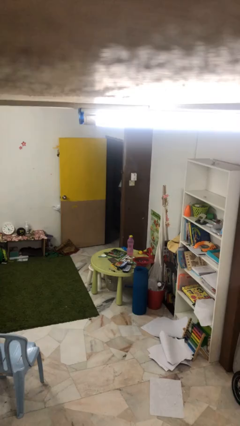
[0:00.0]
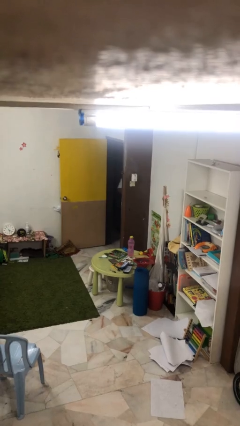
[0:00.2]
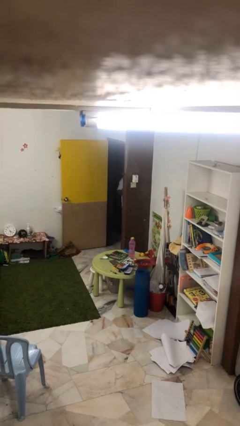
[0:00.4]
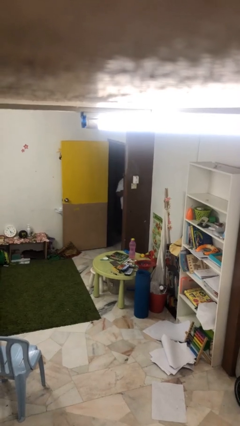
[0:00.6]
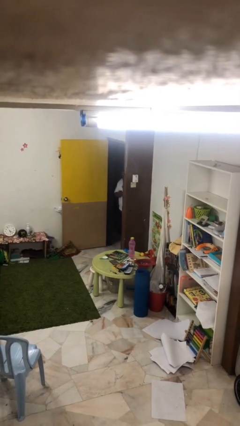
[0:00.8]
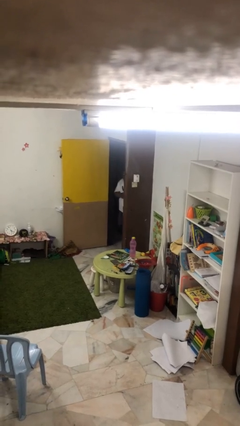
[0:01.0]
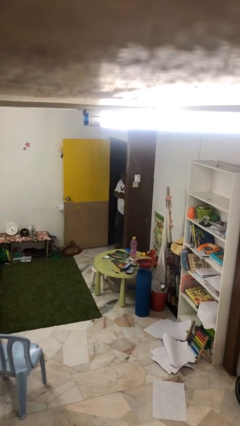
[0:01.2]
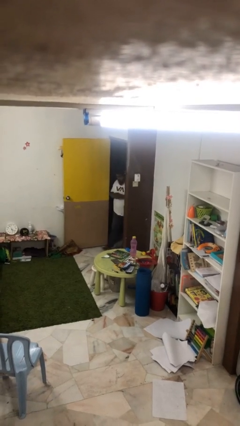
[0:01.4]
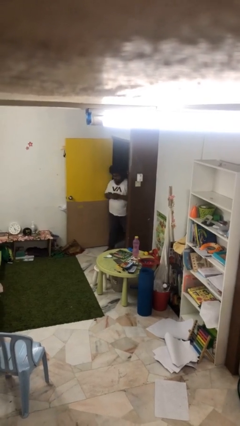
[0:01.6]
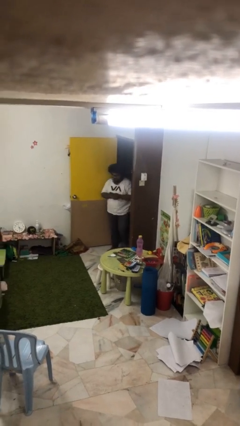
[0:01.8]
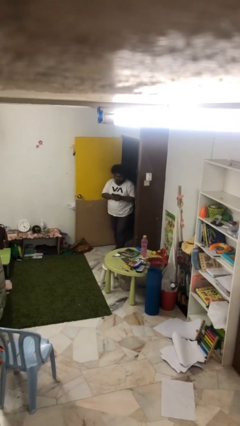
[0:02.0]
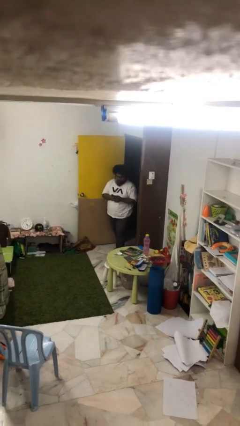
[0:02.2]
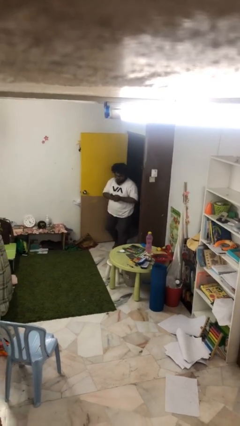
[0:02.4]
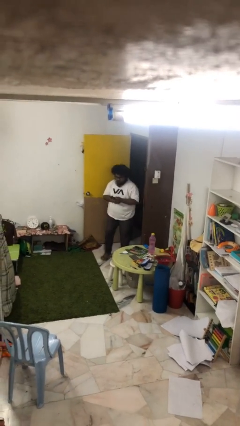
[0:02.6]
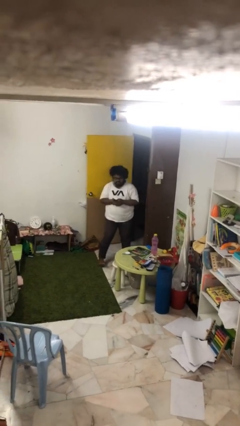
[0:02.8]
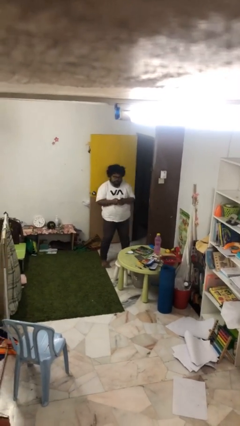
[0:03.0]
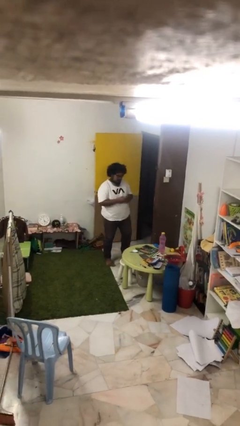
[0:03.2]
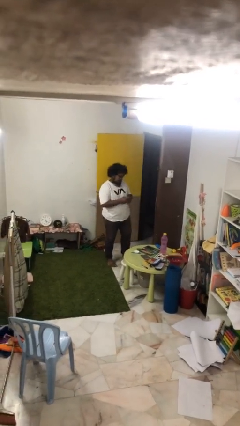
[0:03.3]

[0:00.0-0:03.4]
person enters scene through structure

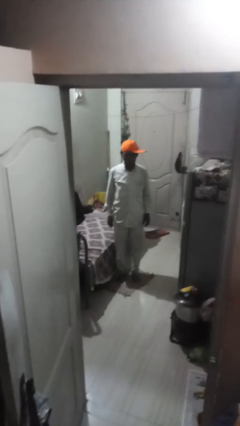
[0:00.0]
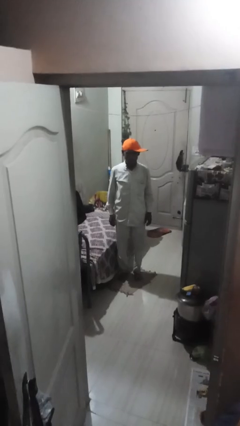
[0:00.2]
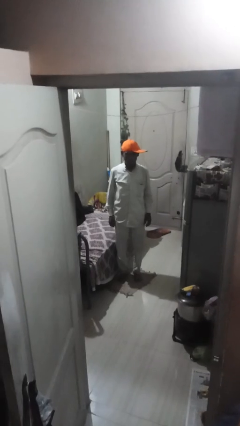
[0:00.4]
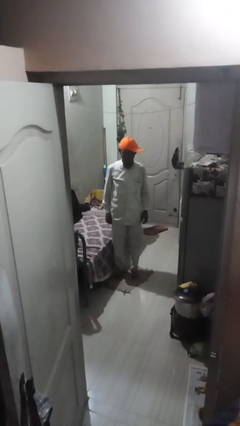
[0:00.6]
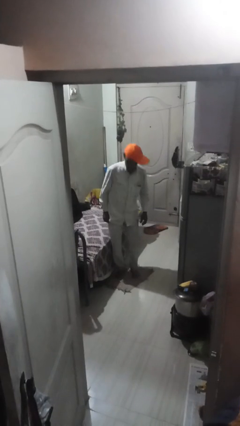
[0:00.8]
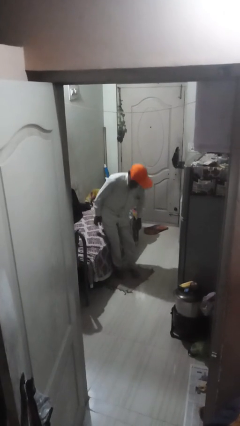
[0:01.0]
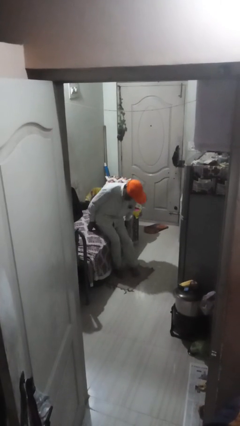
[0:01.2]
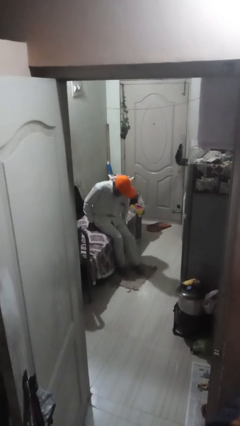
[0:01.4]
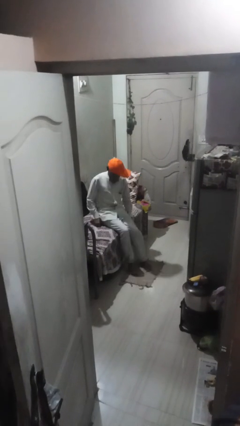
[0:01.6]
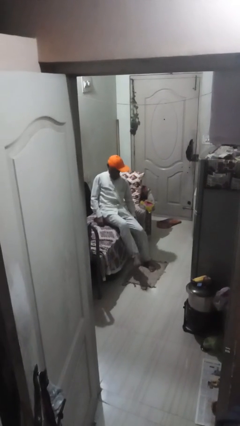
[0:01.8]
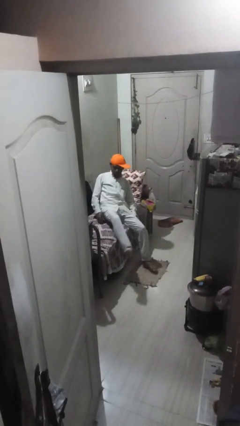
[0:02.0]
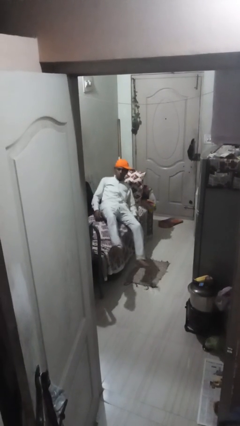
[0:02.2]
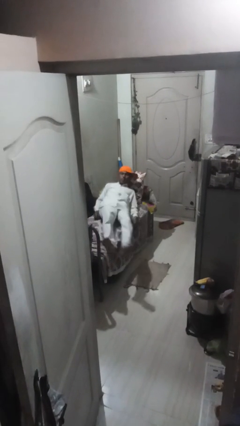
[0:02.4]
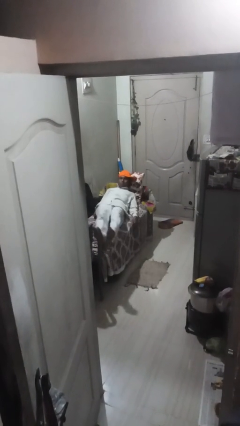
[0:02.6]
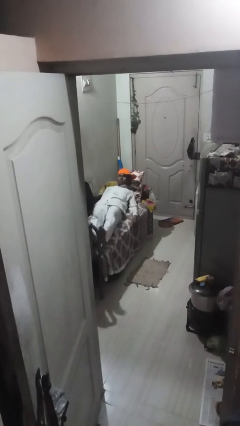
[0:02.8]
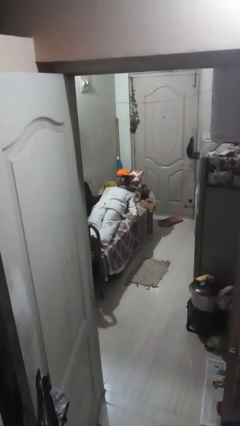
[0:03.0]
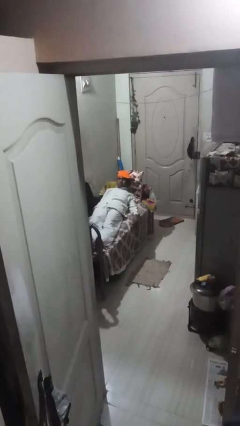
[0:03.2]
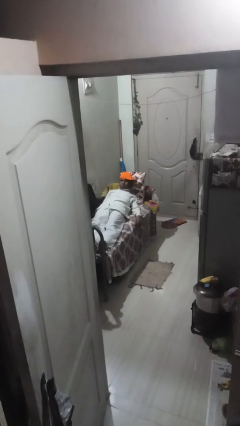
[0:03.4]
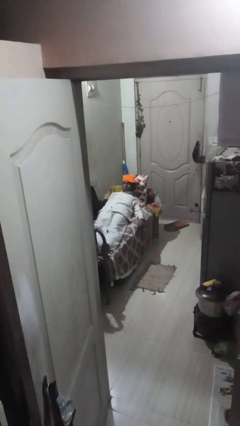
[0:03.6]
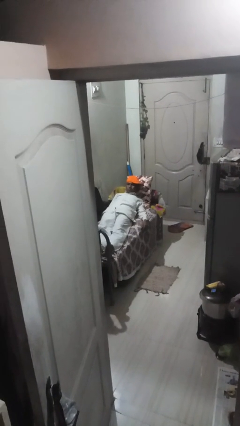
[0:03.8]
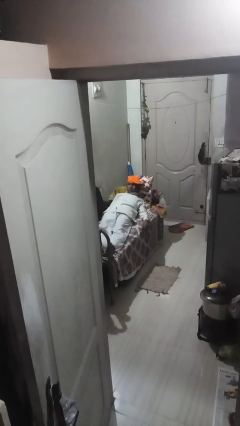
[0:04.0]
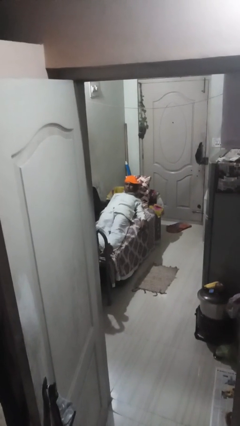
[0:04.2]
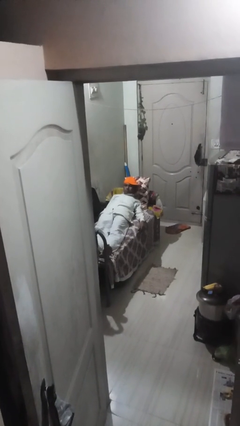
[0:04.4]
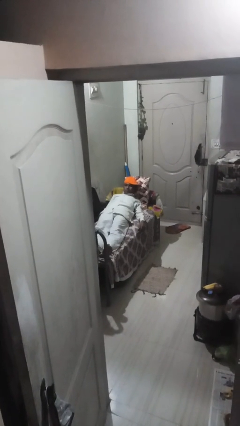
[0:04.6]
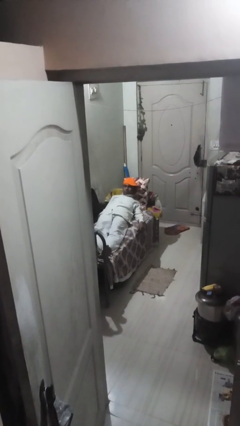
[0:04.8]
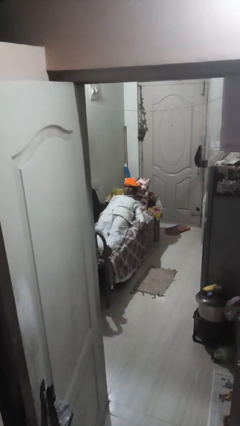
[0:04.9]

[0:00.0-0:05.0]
person lies down on bed

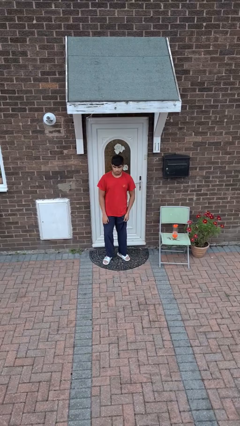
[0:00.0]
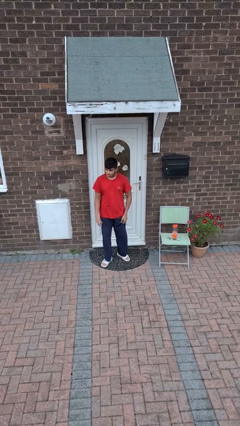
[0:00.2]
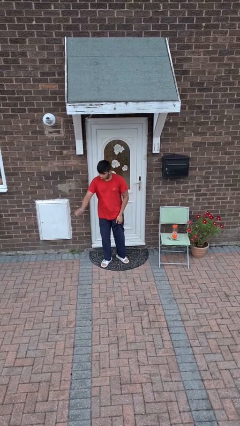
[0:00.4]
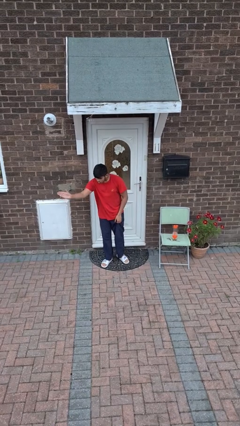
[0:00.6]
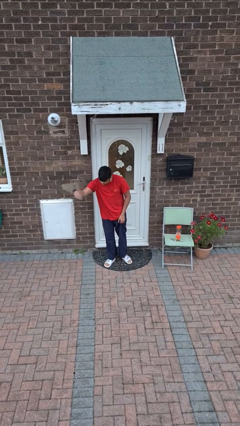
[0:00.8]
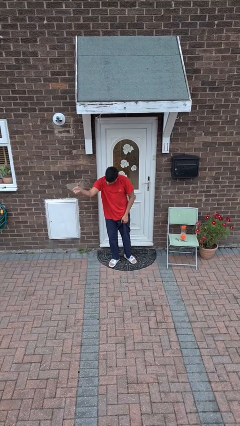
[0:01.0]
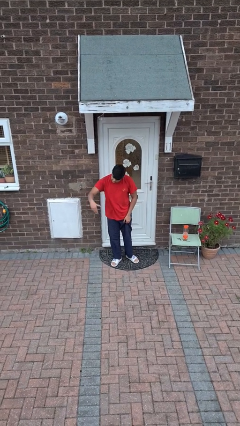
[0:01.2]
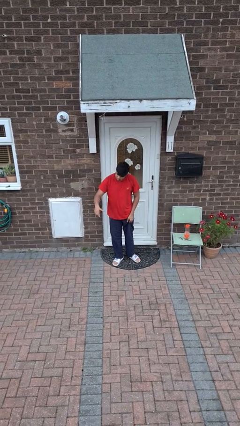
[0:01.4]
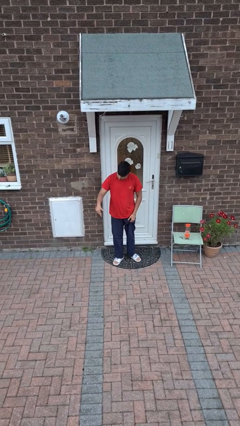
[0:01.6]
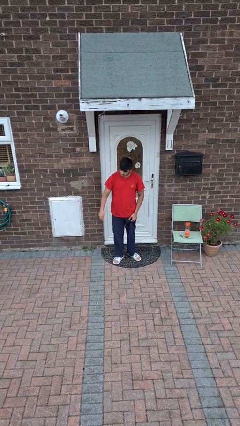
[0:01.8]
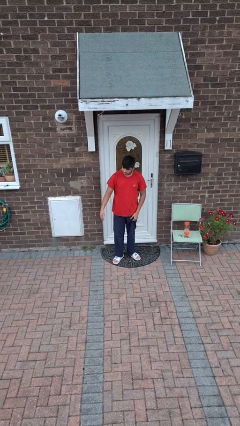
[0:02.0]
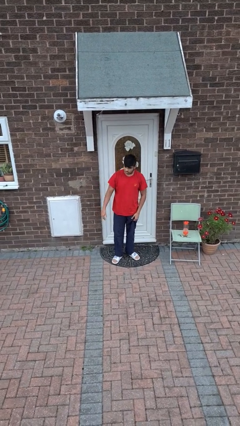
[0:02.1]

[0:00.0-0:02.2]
person gestures come here

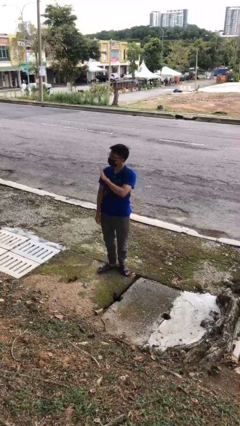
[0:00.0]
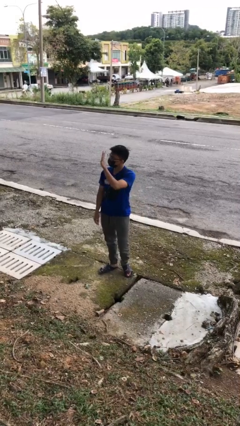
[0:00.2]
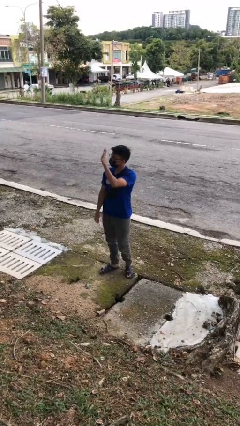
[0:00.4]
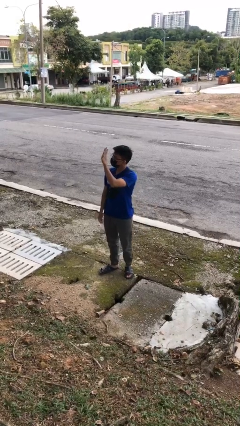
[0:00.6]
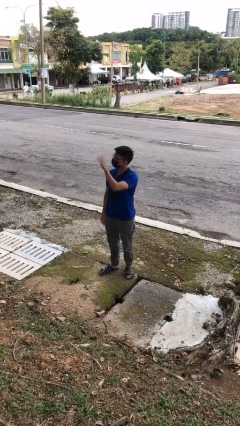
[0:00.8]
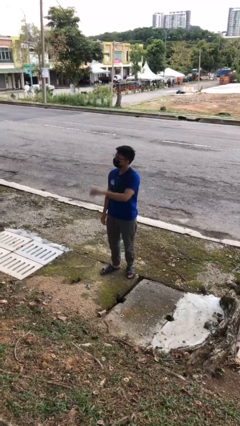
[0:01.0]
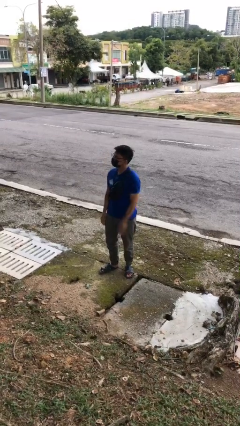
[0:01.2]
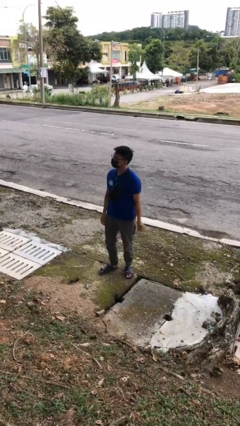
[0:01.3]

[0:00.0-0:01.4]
person gestures number five

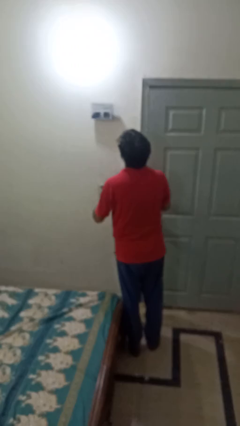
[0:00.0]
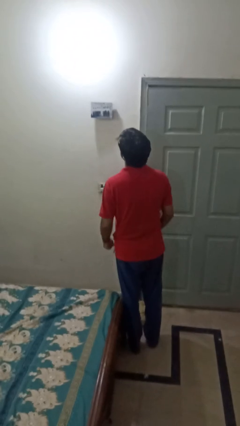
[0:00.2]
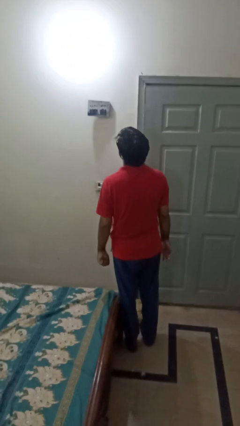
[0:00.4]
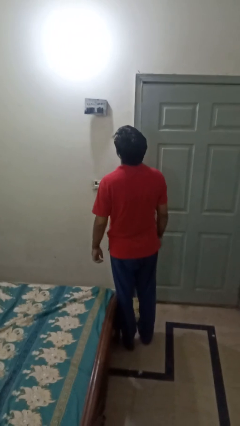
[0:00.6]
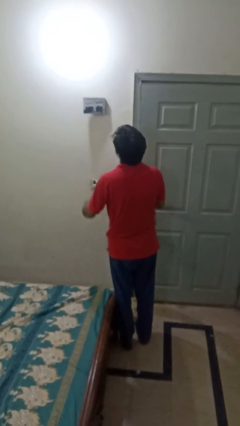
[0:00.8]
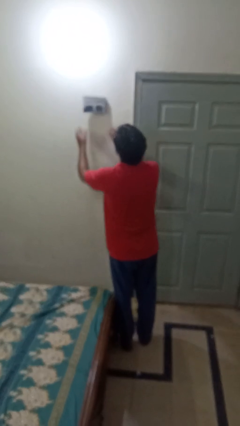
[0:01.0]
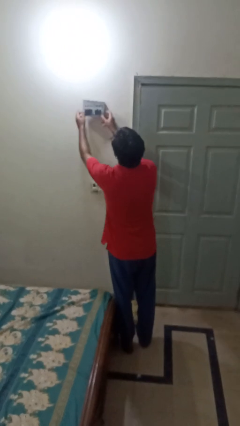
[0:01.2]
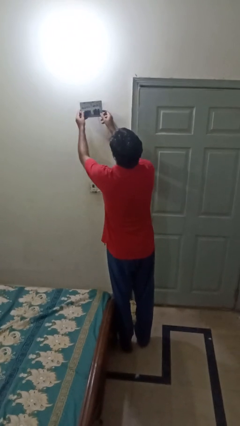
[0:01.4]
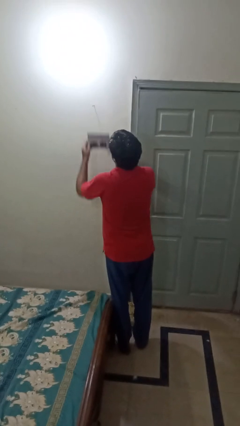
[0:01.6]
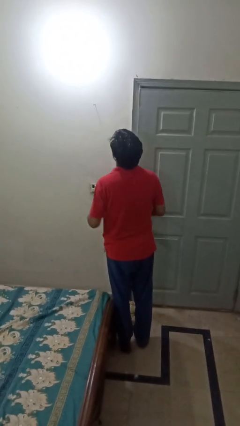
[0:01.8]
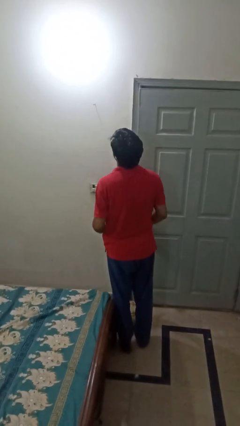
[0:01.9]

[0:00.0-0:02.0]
person takes down picture frame

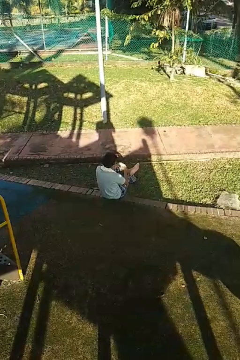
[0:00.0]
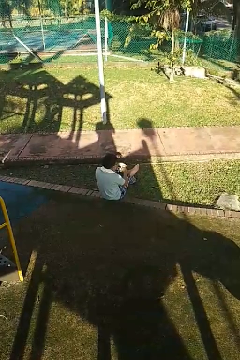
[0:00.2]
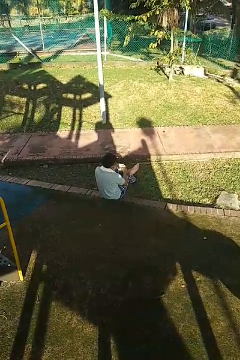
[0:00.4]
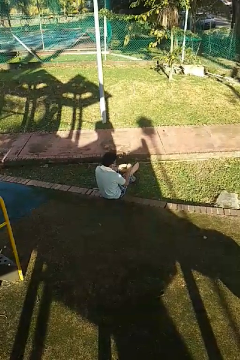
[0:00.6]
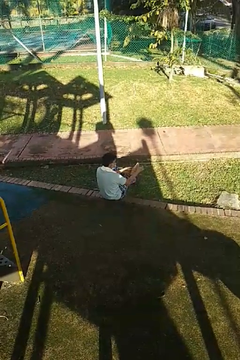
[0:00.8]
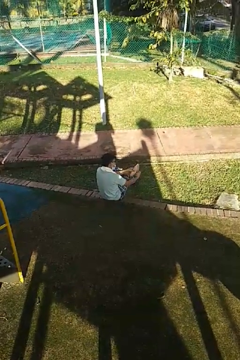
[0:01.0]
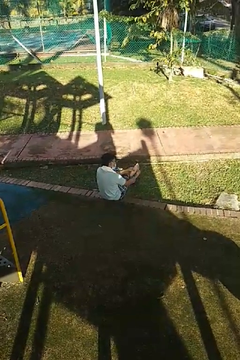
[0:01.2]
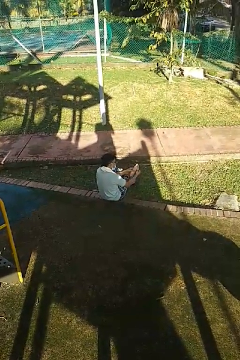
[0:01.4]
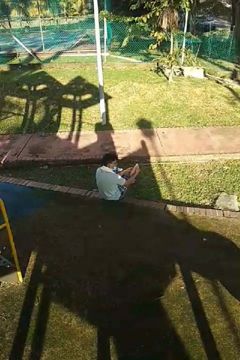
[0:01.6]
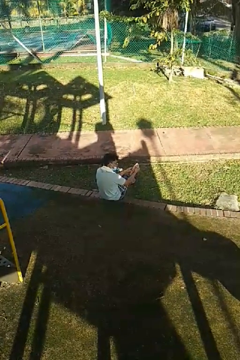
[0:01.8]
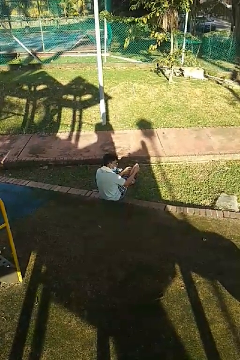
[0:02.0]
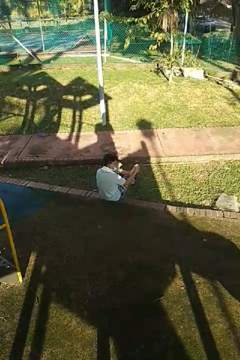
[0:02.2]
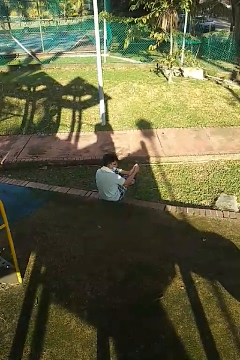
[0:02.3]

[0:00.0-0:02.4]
person rubs foot

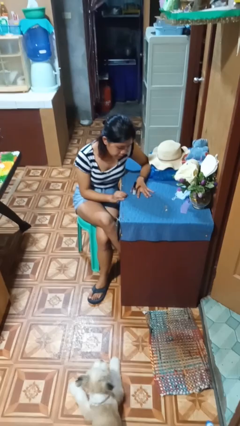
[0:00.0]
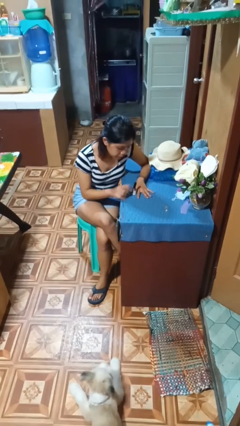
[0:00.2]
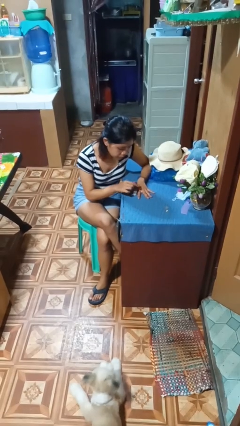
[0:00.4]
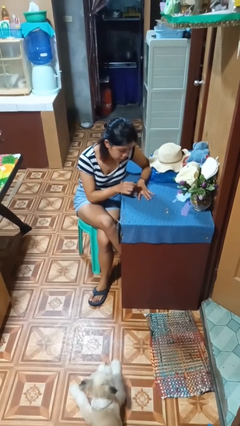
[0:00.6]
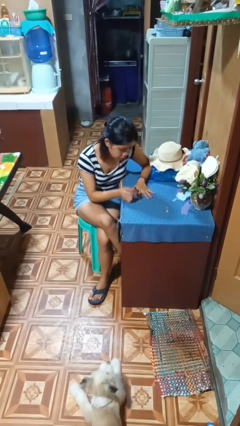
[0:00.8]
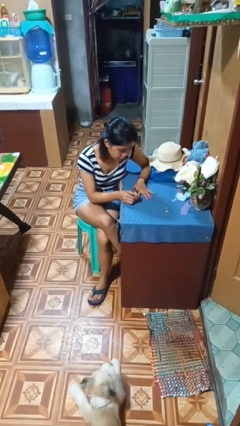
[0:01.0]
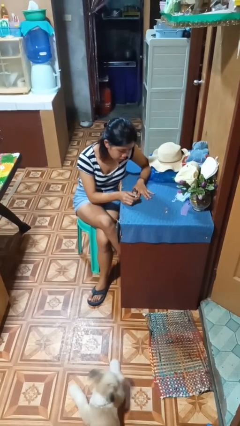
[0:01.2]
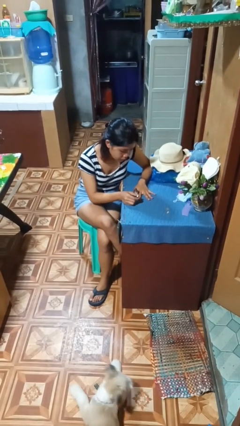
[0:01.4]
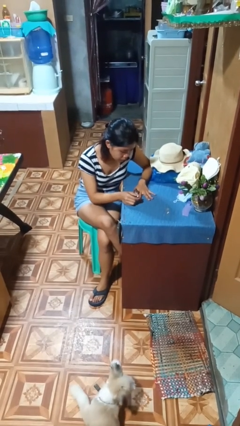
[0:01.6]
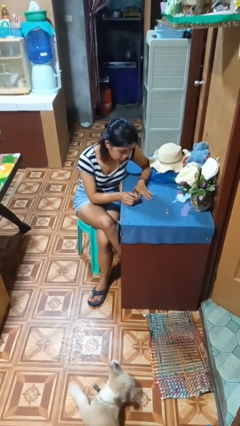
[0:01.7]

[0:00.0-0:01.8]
person paints fingernails
